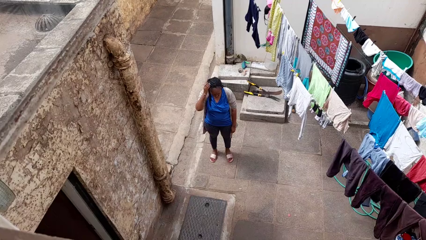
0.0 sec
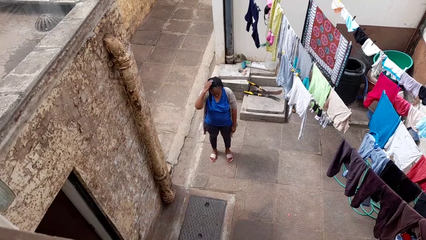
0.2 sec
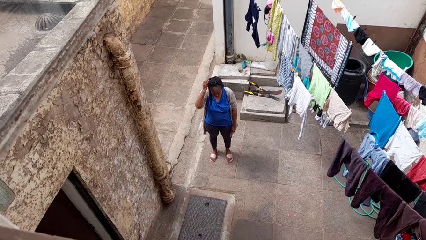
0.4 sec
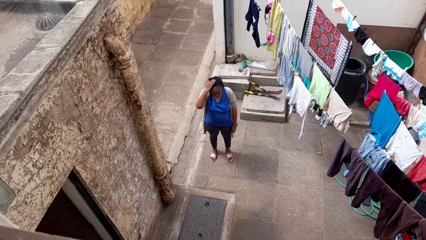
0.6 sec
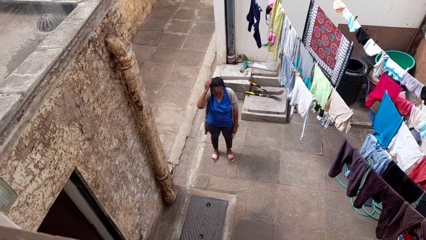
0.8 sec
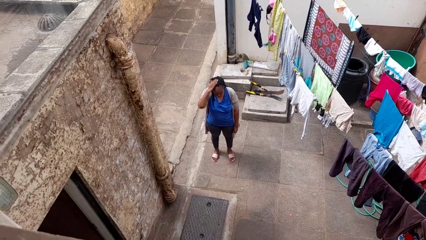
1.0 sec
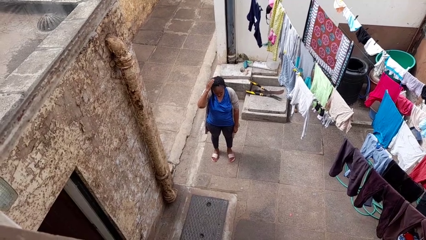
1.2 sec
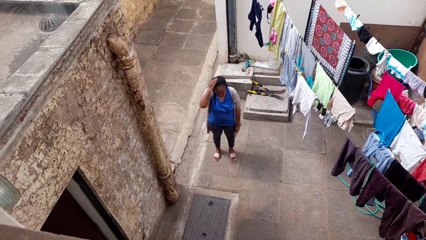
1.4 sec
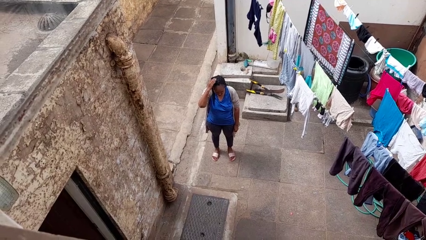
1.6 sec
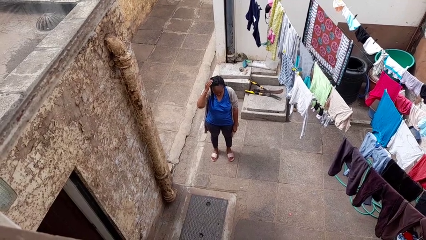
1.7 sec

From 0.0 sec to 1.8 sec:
person pats head

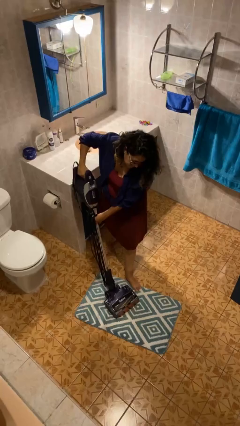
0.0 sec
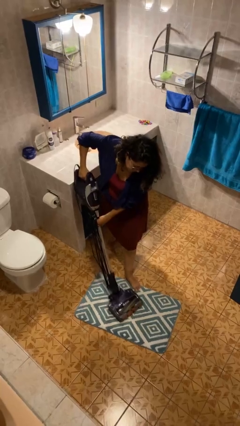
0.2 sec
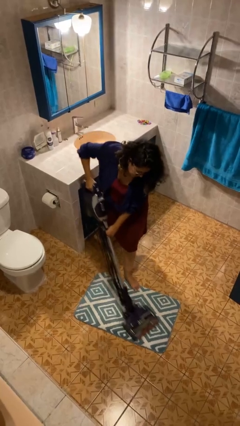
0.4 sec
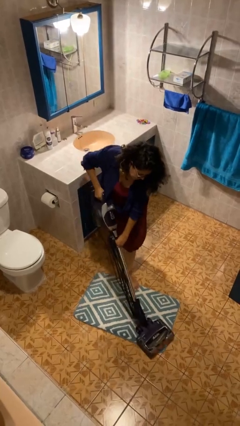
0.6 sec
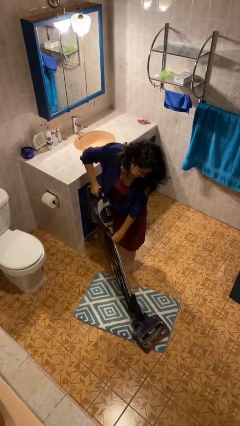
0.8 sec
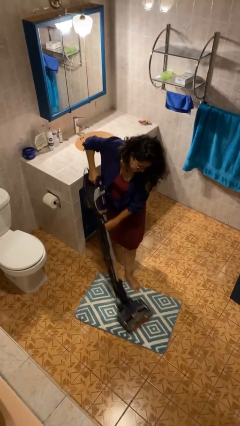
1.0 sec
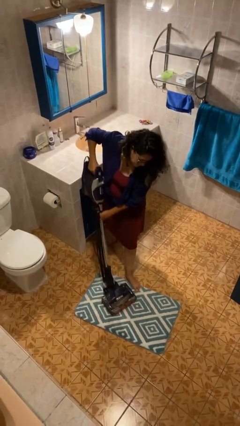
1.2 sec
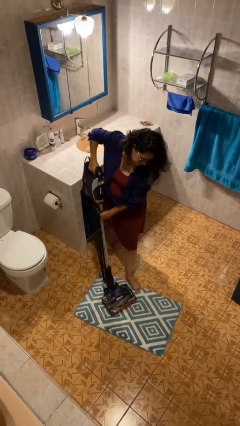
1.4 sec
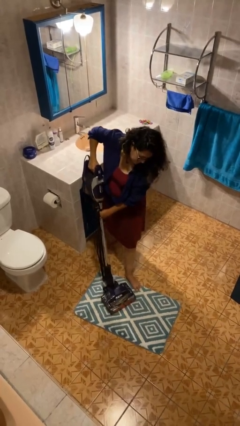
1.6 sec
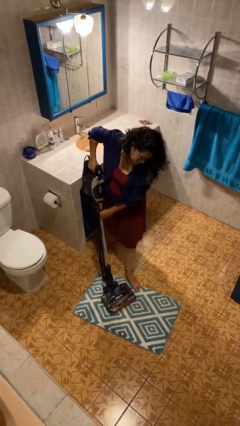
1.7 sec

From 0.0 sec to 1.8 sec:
person vacuums carpet

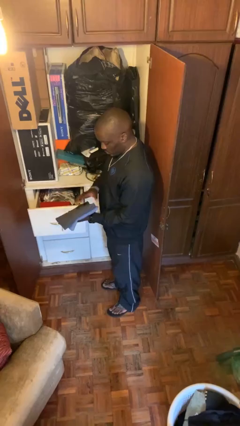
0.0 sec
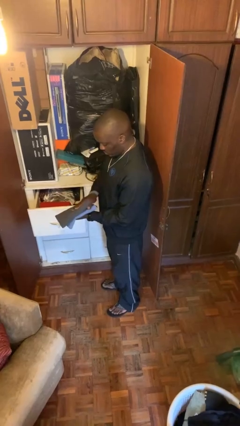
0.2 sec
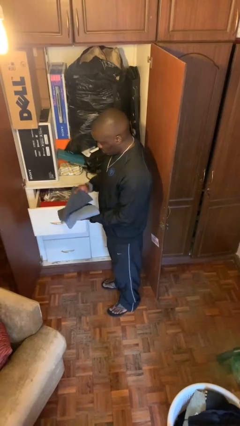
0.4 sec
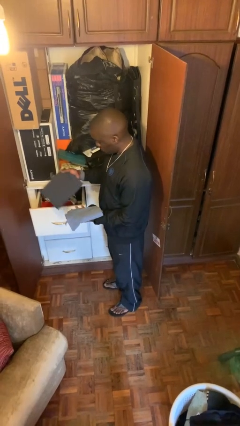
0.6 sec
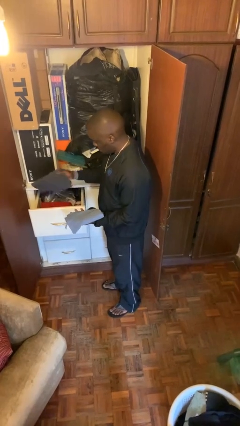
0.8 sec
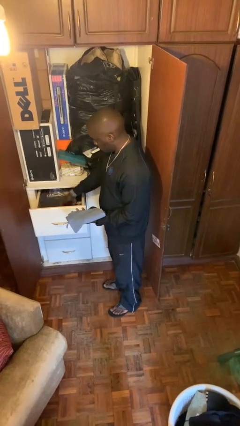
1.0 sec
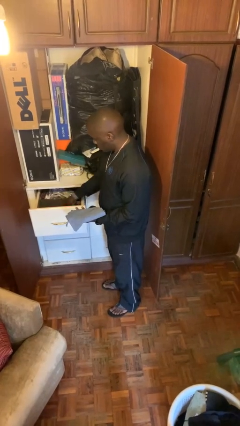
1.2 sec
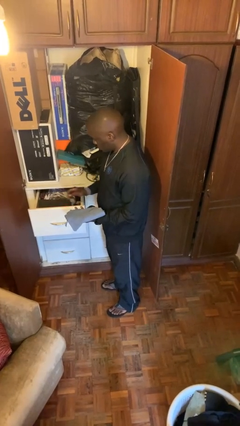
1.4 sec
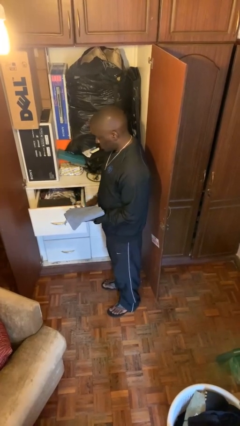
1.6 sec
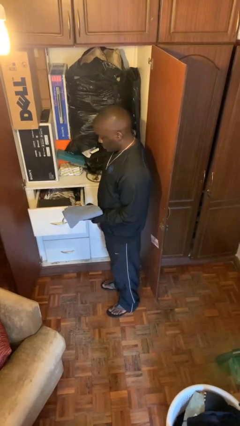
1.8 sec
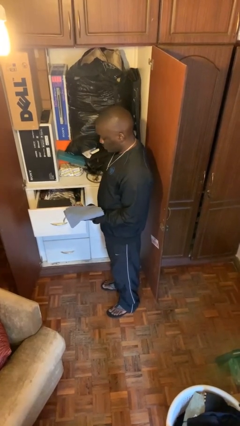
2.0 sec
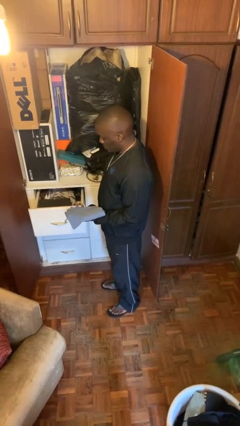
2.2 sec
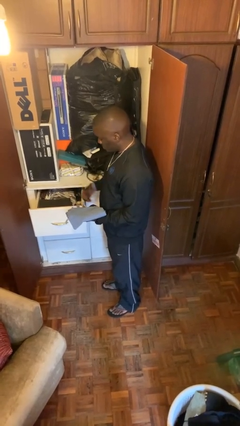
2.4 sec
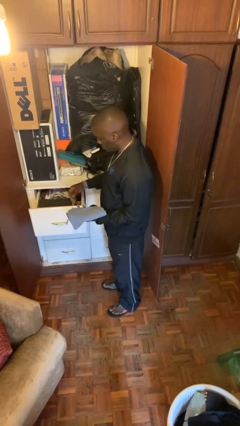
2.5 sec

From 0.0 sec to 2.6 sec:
person puts clothes into dresser

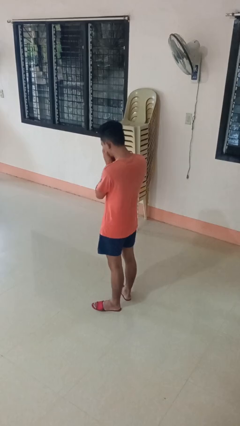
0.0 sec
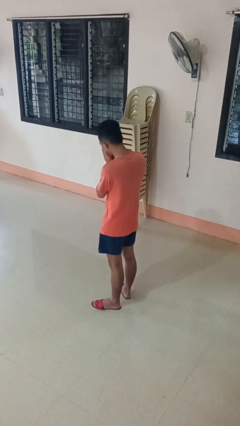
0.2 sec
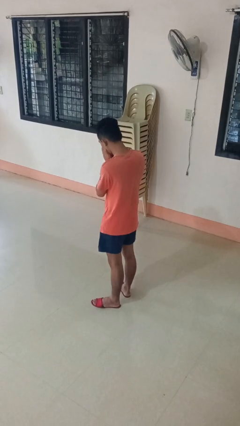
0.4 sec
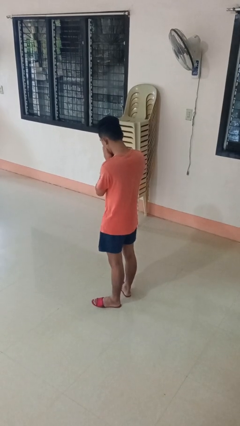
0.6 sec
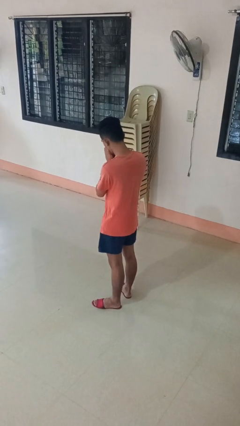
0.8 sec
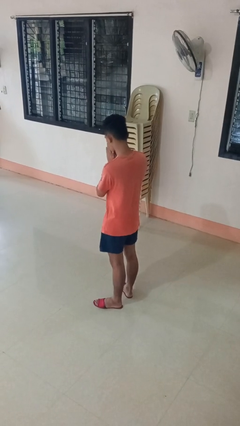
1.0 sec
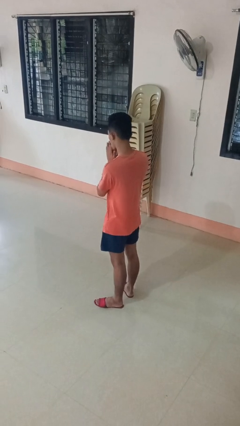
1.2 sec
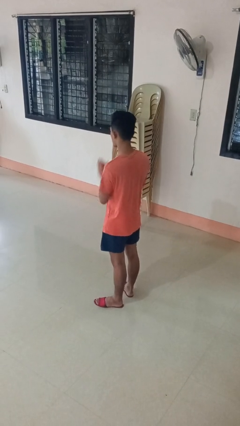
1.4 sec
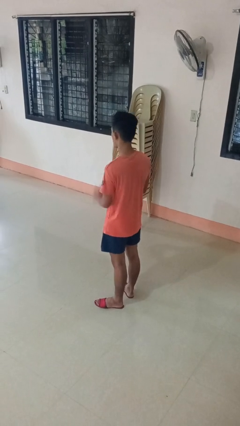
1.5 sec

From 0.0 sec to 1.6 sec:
person shrugs

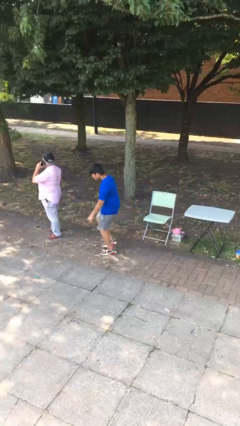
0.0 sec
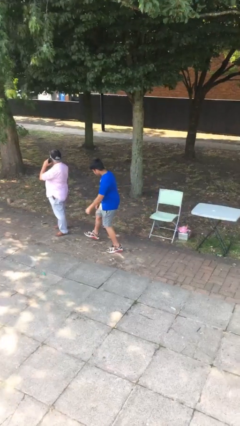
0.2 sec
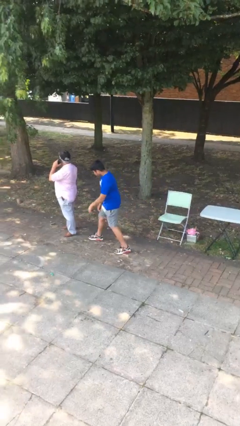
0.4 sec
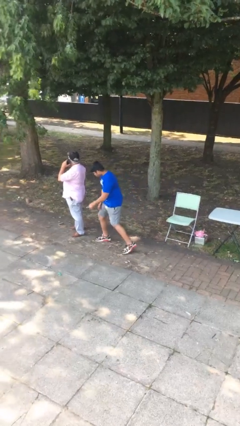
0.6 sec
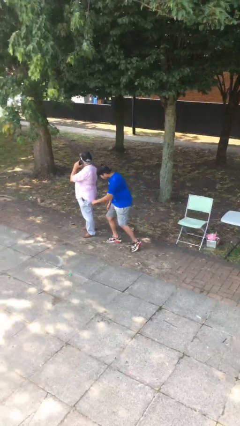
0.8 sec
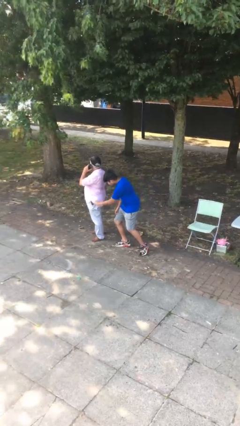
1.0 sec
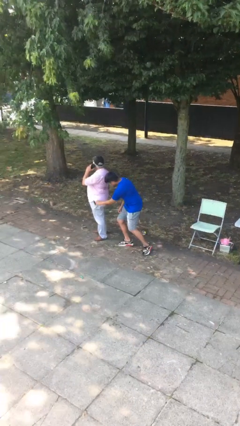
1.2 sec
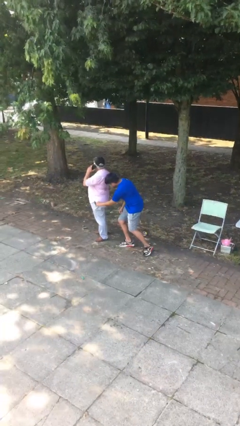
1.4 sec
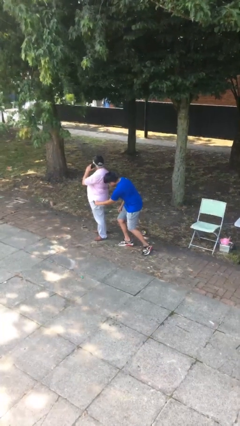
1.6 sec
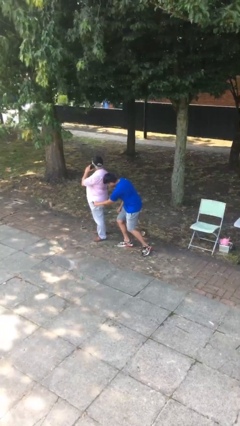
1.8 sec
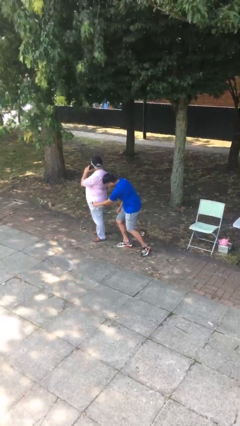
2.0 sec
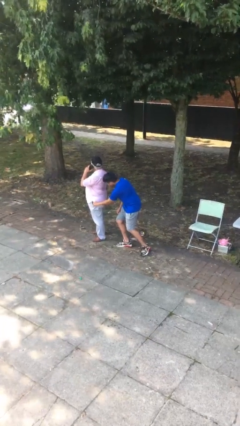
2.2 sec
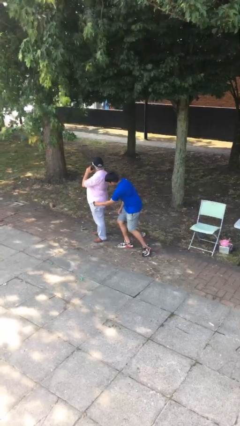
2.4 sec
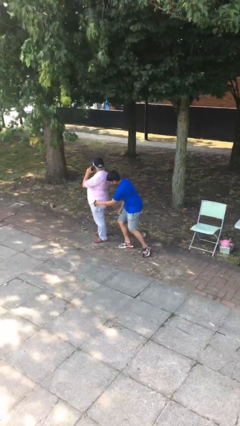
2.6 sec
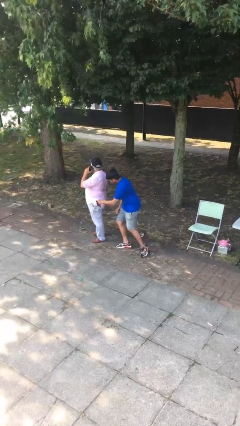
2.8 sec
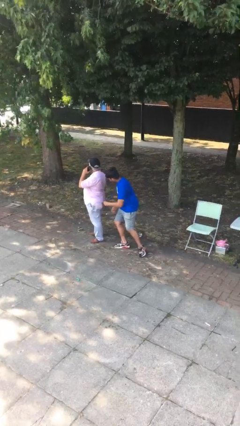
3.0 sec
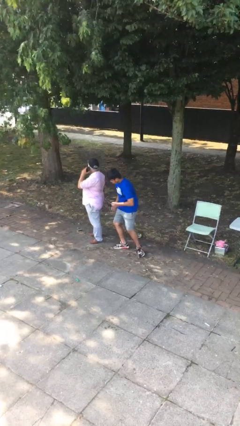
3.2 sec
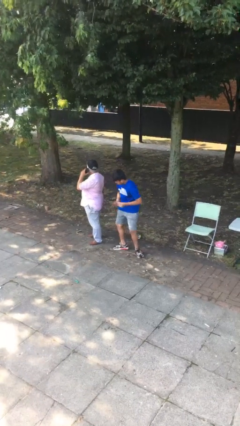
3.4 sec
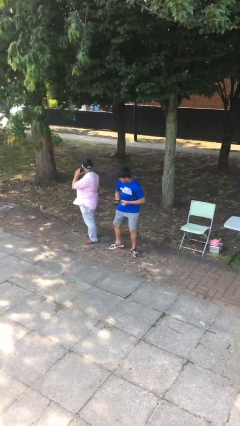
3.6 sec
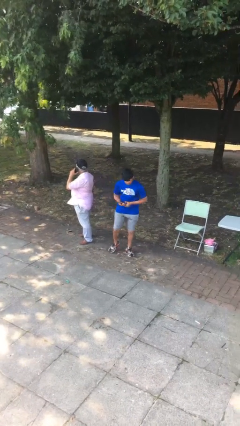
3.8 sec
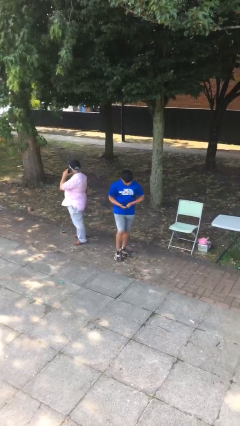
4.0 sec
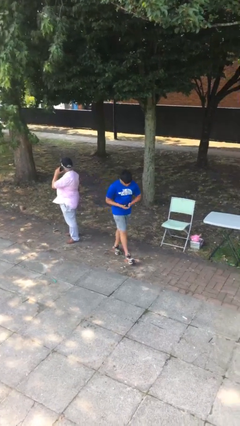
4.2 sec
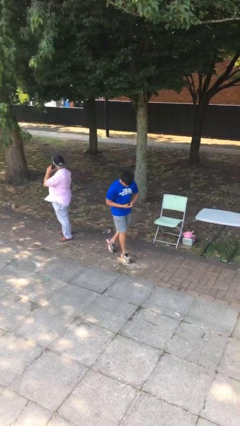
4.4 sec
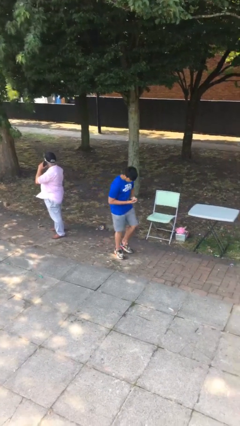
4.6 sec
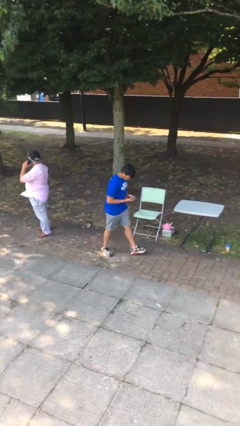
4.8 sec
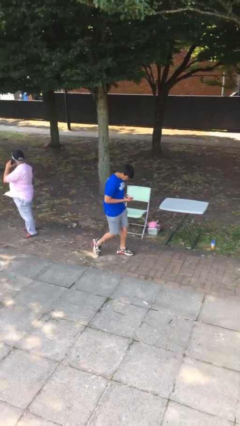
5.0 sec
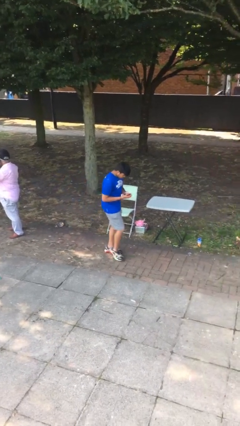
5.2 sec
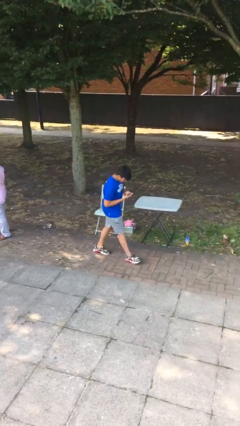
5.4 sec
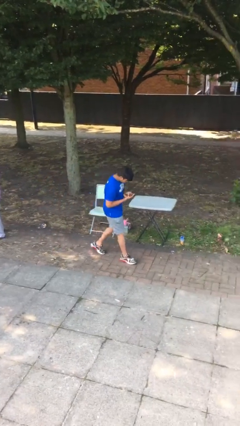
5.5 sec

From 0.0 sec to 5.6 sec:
person steals object from person

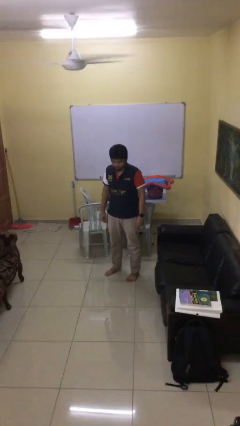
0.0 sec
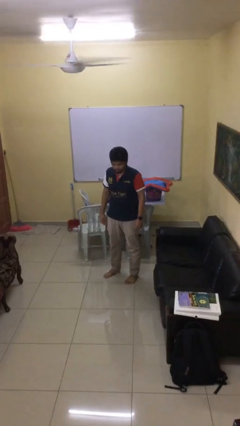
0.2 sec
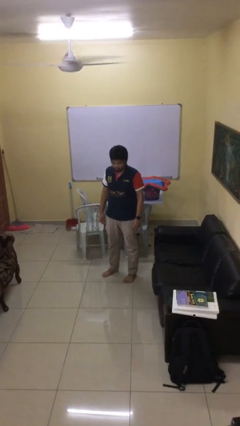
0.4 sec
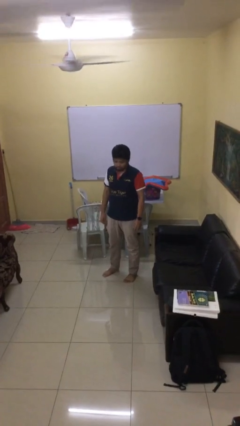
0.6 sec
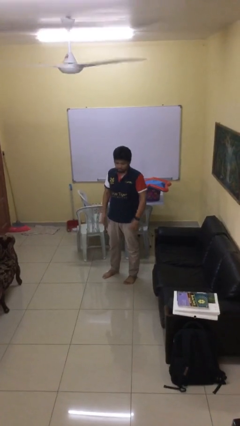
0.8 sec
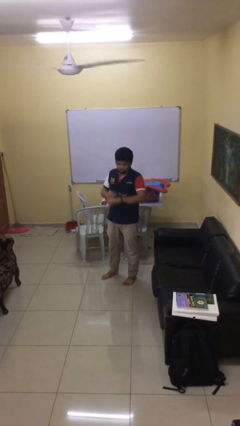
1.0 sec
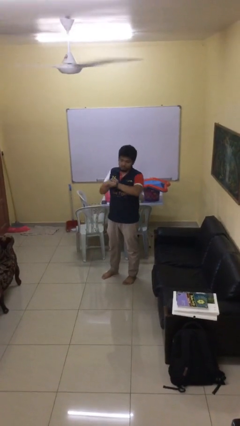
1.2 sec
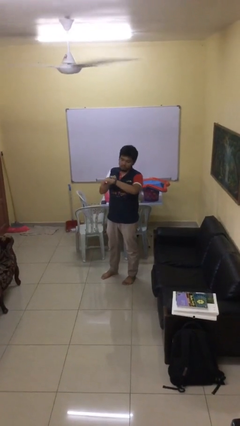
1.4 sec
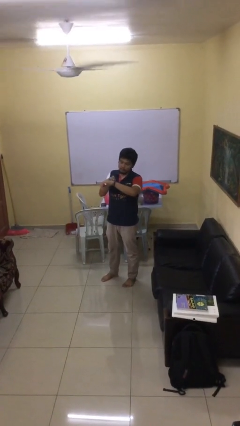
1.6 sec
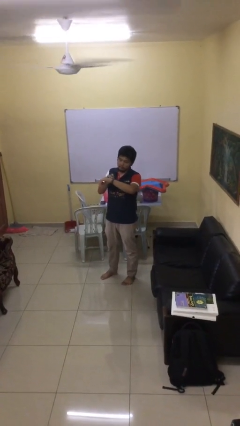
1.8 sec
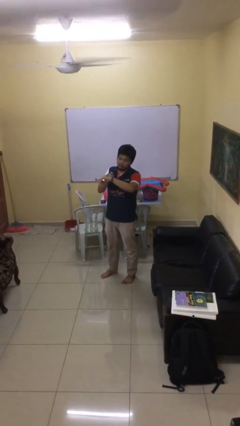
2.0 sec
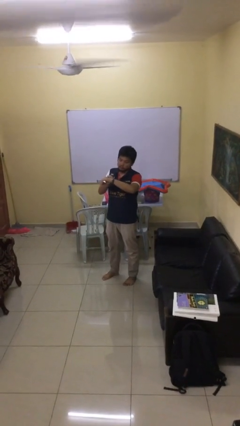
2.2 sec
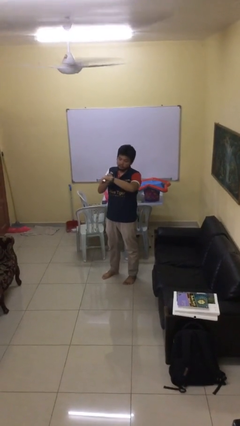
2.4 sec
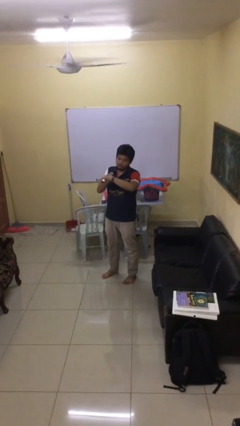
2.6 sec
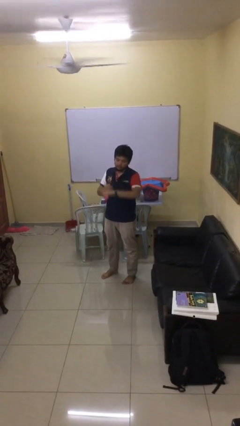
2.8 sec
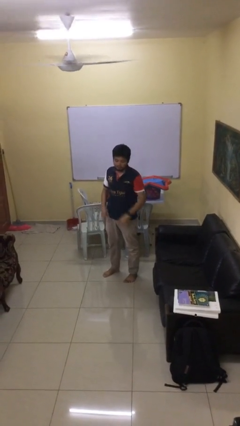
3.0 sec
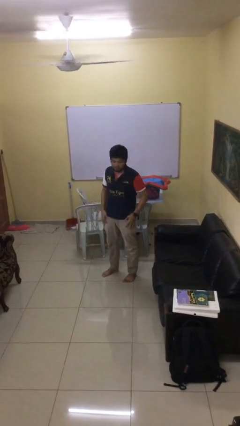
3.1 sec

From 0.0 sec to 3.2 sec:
person looks at wristwatch

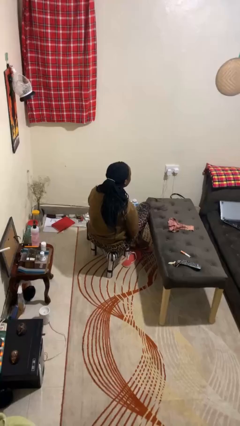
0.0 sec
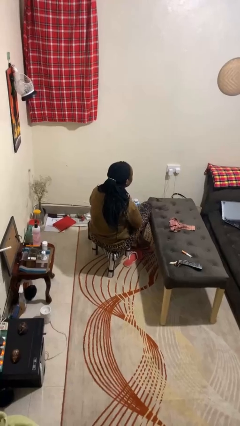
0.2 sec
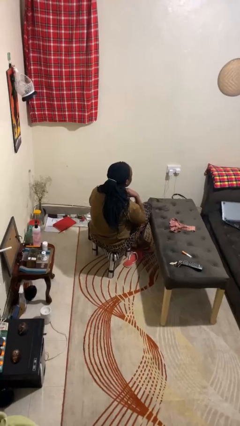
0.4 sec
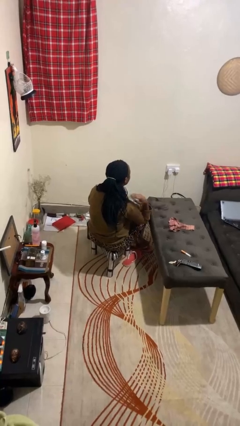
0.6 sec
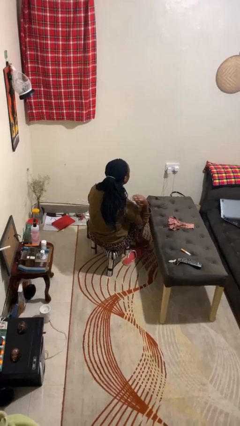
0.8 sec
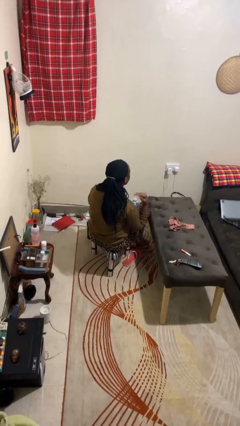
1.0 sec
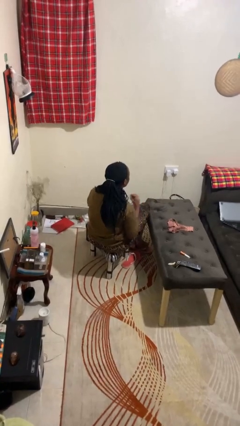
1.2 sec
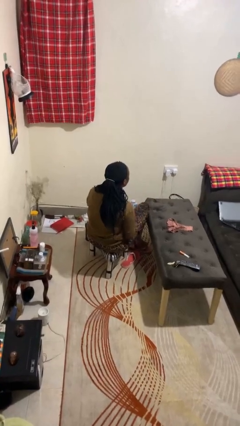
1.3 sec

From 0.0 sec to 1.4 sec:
person gestures cut
